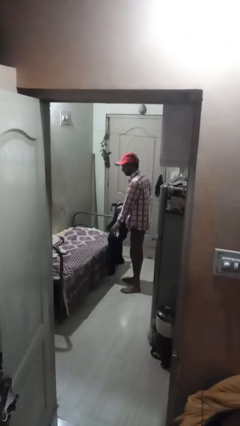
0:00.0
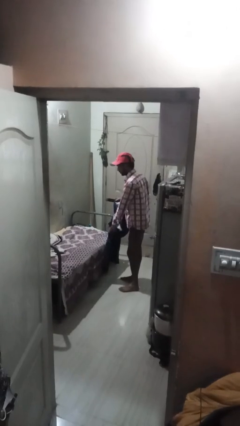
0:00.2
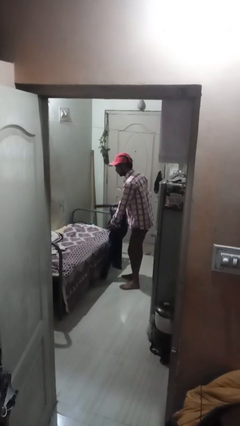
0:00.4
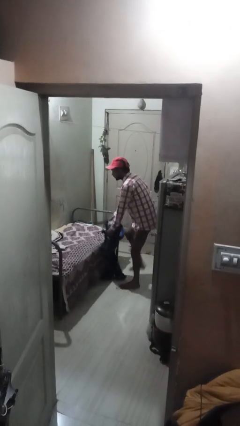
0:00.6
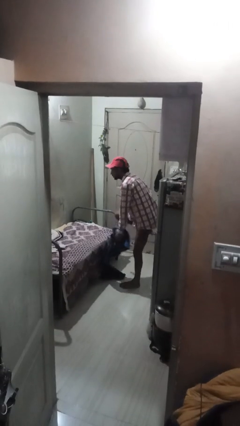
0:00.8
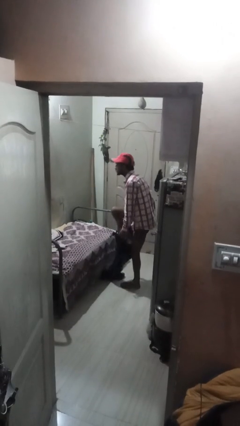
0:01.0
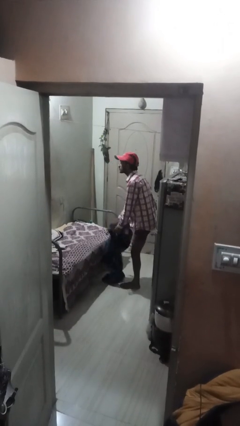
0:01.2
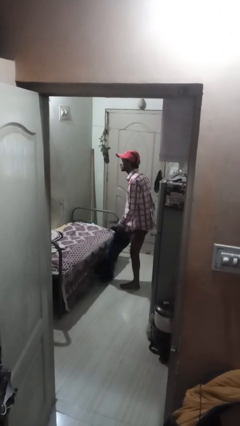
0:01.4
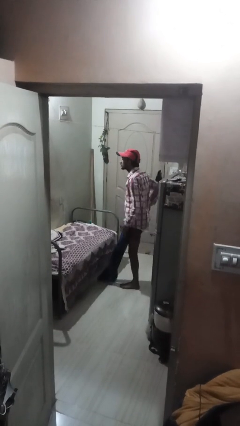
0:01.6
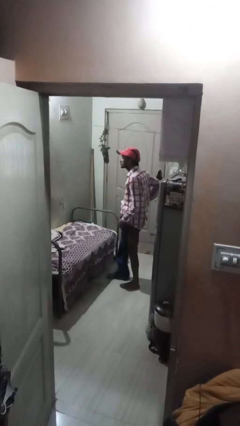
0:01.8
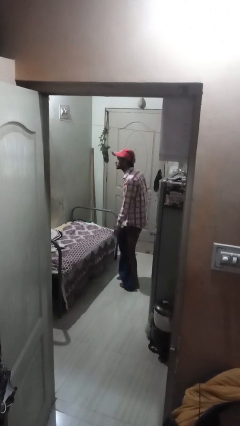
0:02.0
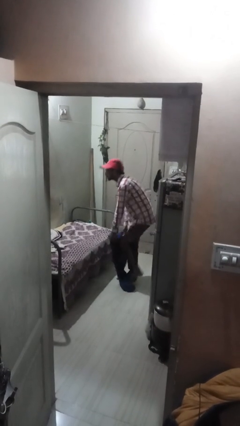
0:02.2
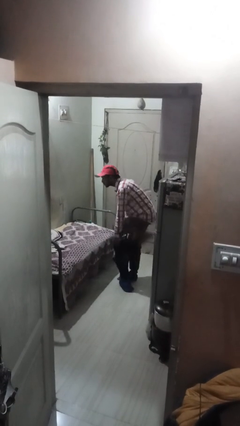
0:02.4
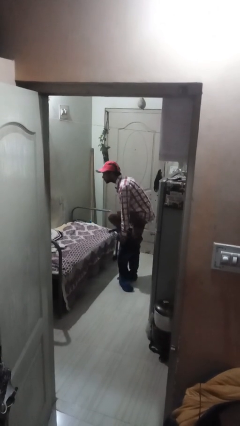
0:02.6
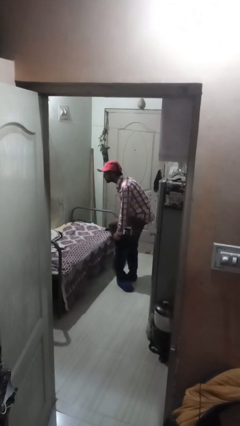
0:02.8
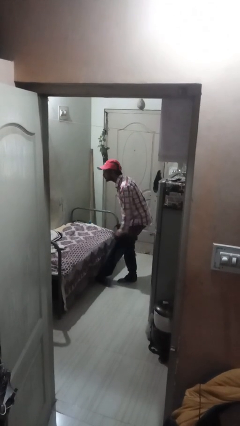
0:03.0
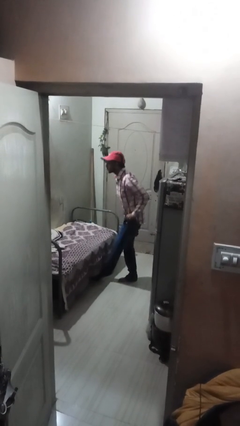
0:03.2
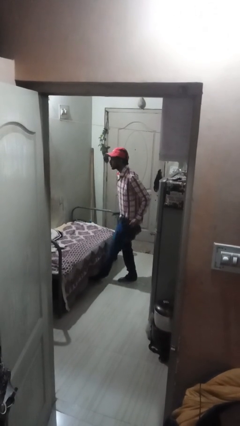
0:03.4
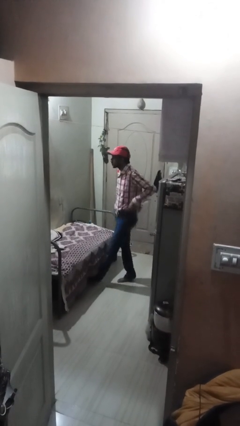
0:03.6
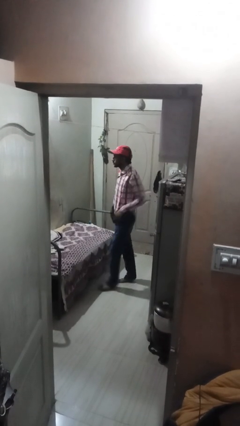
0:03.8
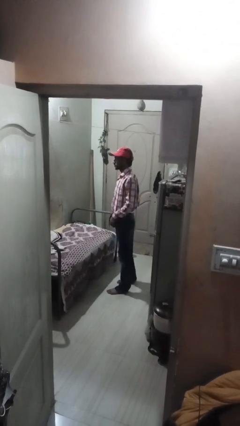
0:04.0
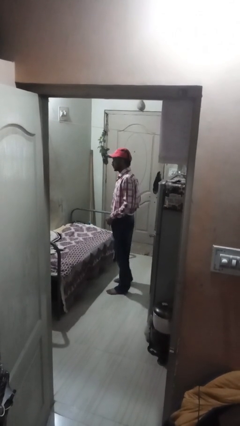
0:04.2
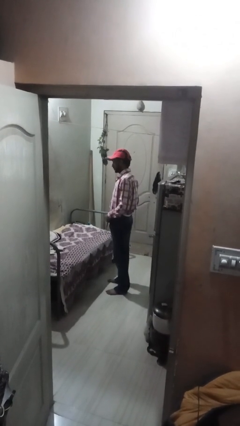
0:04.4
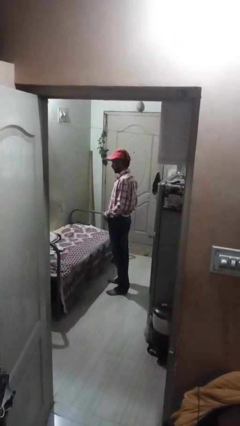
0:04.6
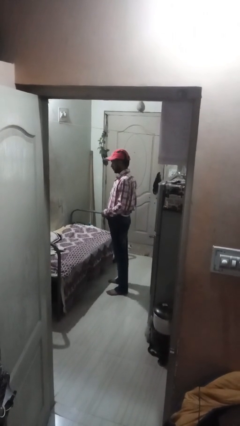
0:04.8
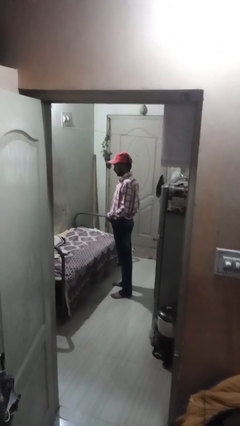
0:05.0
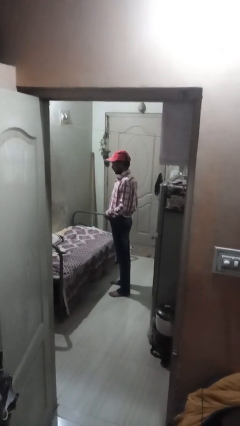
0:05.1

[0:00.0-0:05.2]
person puts on pants

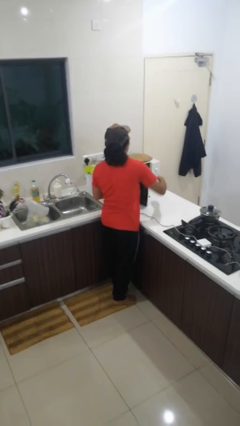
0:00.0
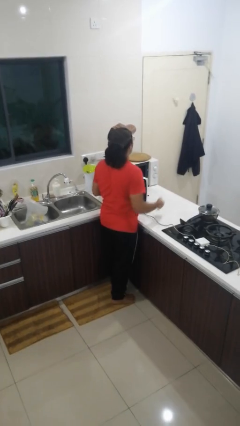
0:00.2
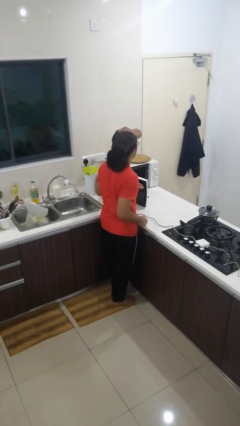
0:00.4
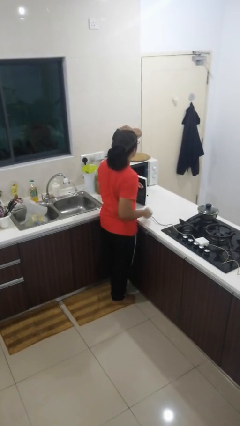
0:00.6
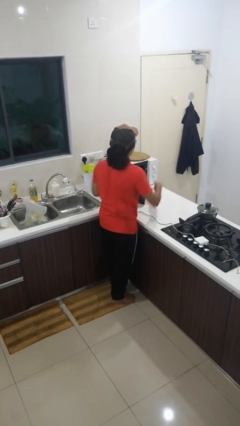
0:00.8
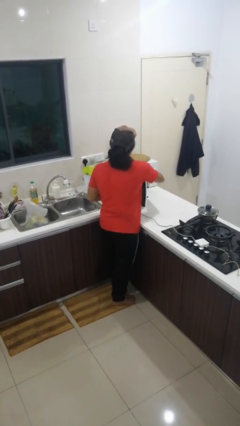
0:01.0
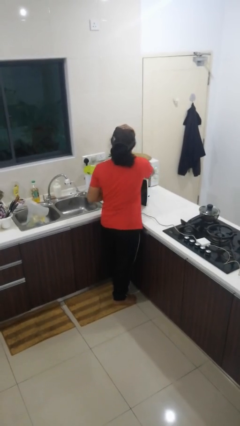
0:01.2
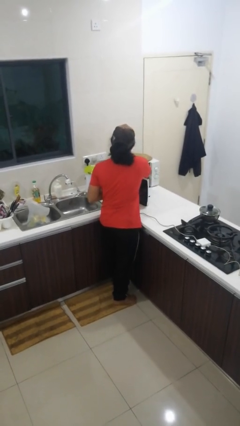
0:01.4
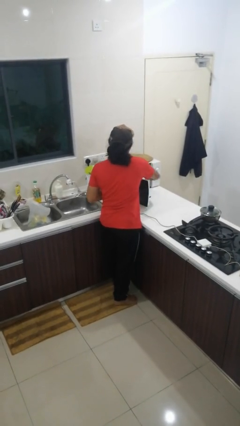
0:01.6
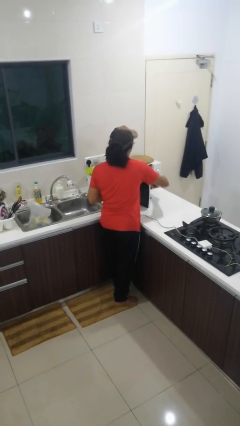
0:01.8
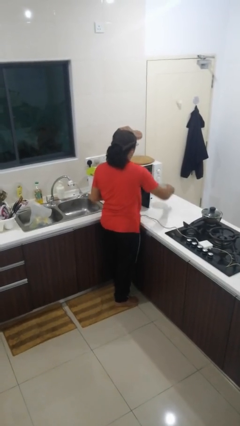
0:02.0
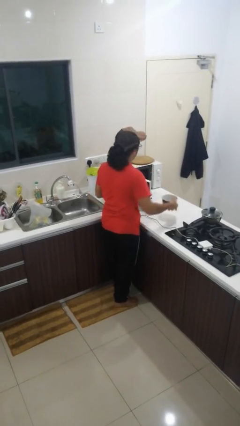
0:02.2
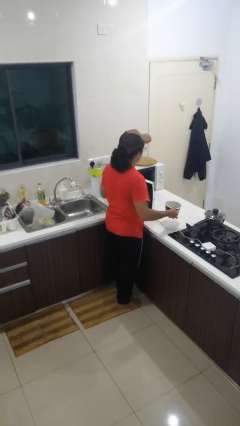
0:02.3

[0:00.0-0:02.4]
person takes object from microwave

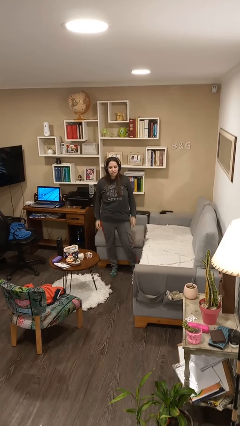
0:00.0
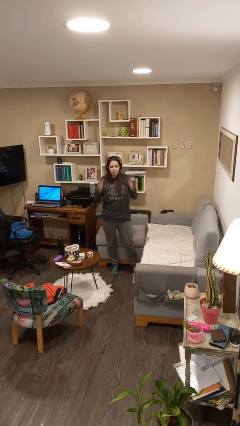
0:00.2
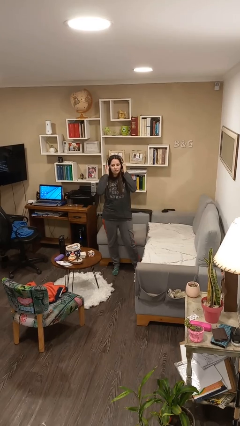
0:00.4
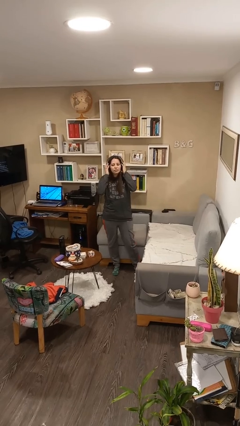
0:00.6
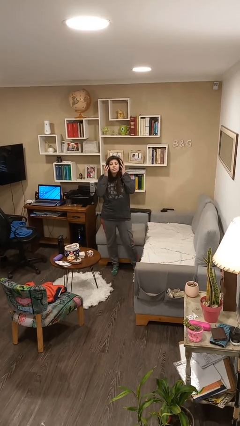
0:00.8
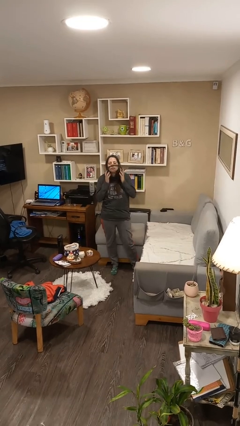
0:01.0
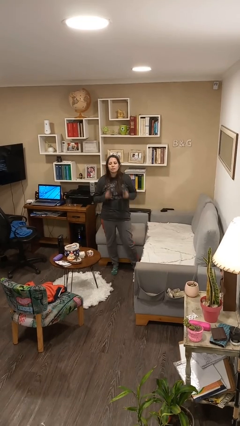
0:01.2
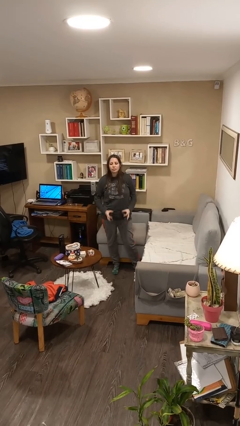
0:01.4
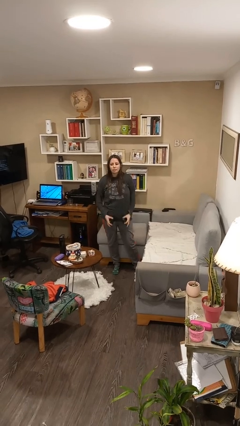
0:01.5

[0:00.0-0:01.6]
person takes off headphones

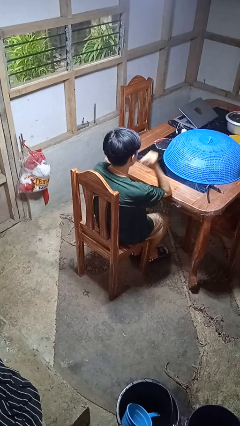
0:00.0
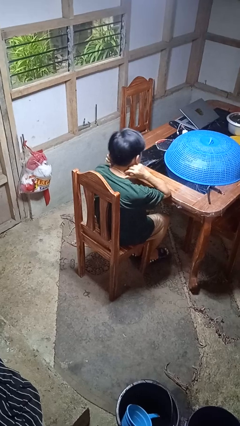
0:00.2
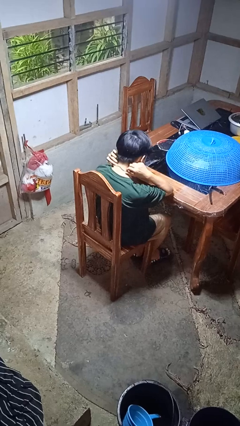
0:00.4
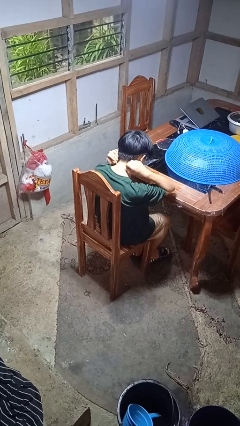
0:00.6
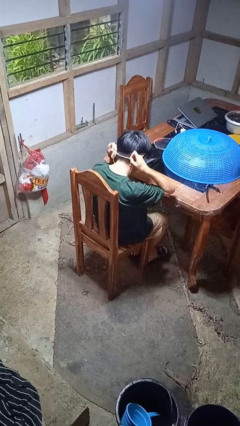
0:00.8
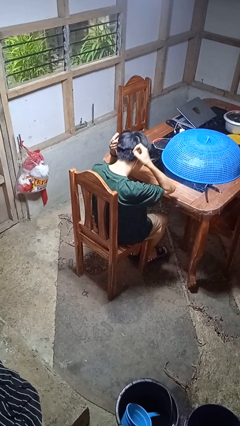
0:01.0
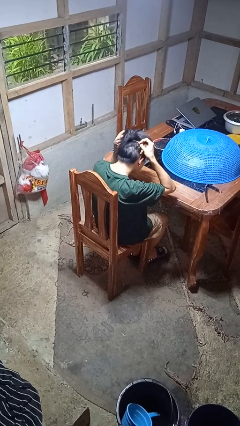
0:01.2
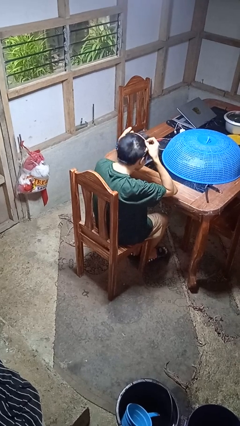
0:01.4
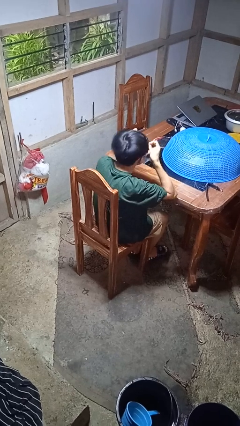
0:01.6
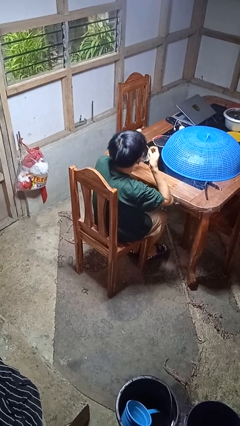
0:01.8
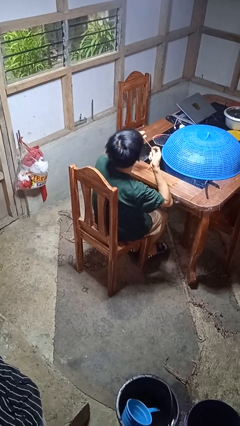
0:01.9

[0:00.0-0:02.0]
person takes off necklace

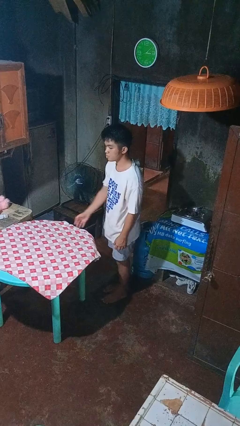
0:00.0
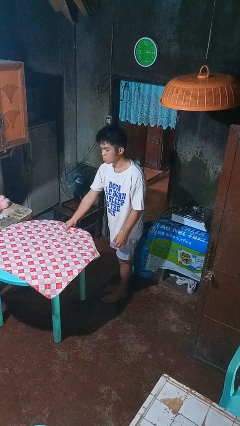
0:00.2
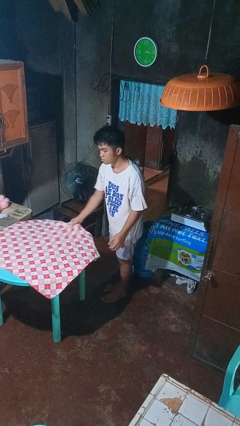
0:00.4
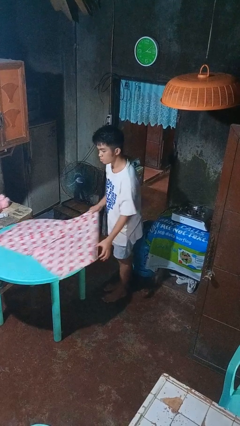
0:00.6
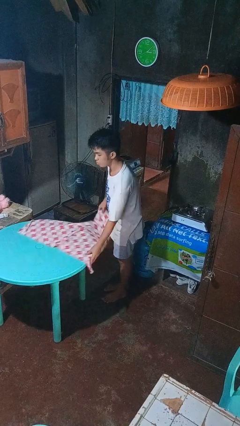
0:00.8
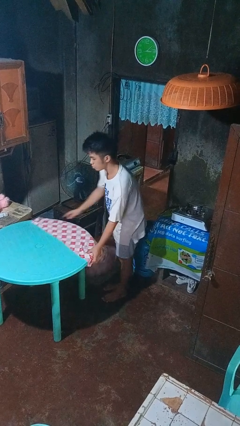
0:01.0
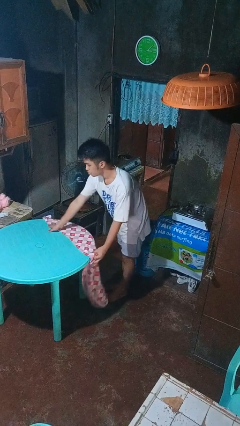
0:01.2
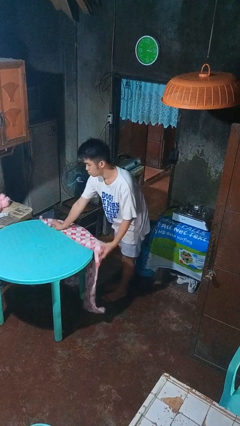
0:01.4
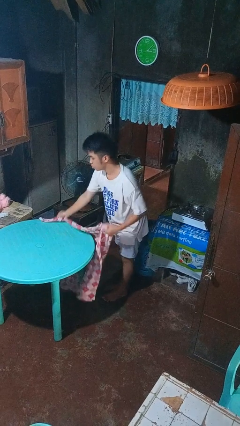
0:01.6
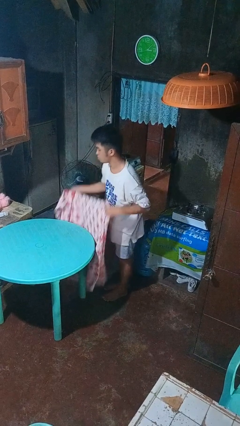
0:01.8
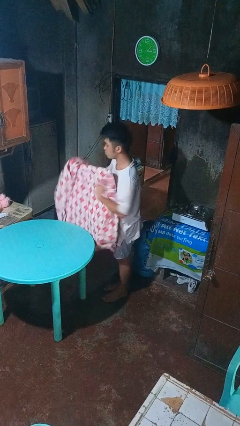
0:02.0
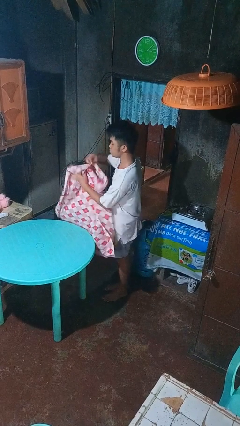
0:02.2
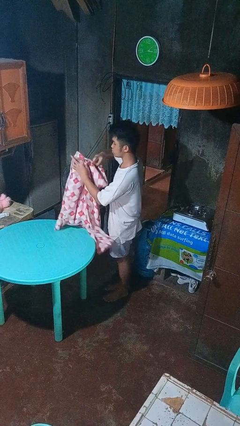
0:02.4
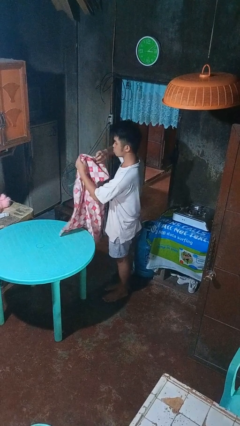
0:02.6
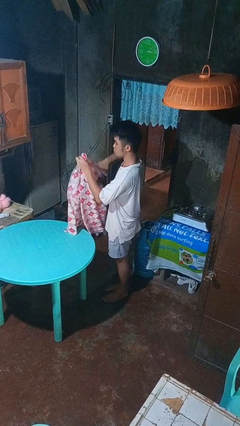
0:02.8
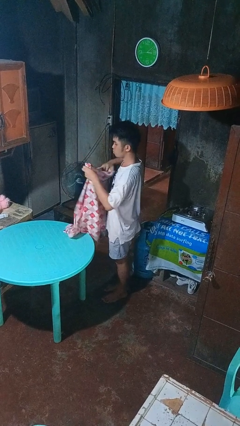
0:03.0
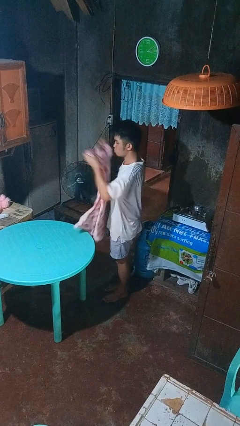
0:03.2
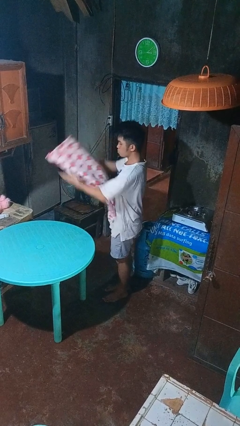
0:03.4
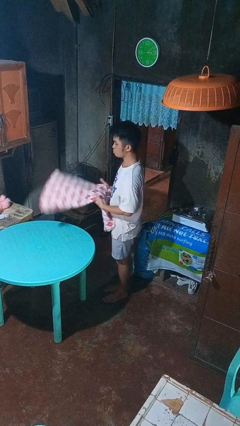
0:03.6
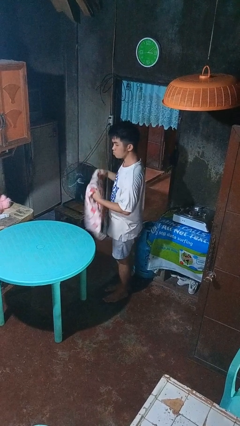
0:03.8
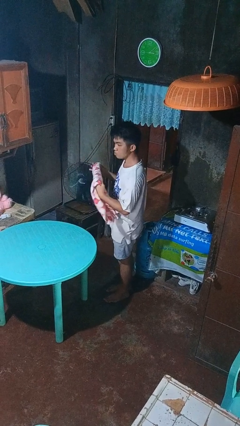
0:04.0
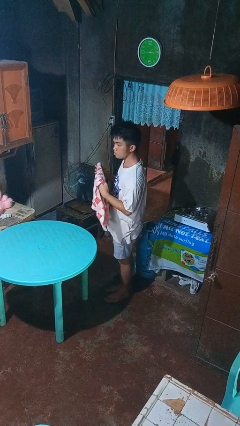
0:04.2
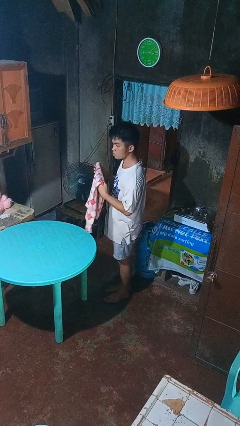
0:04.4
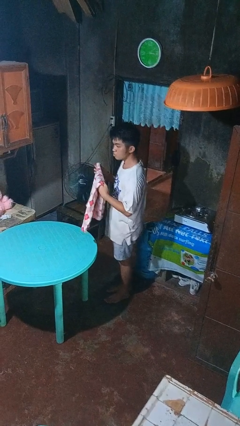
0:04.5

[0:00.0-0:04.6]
person folds tablecloth

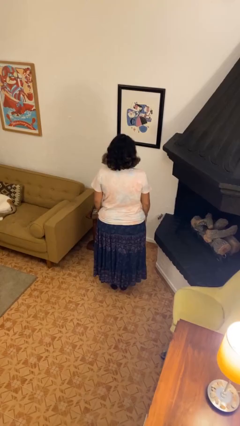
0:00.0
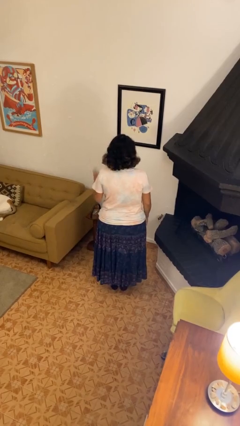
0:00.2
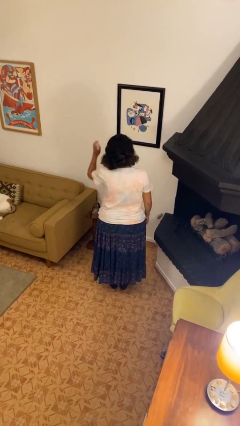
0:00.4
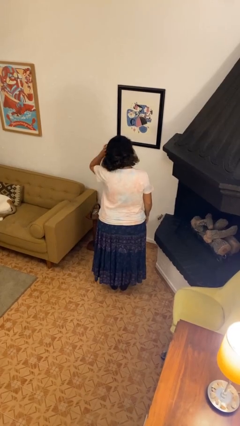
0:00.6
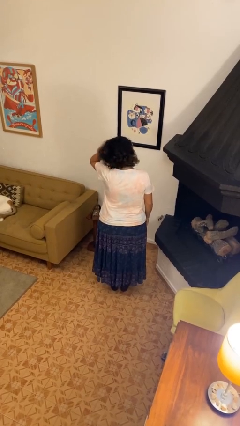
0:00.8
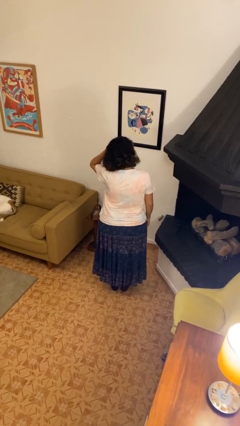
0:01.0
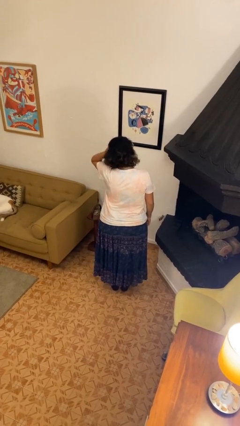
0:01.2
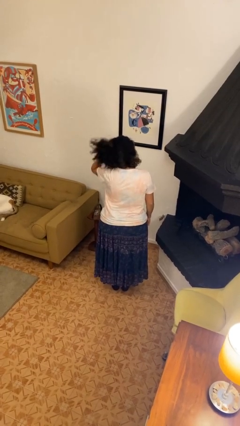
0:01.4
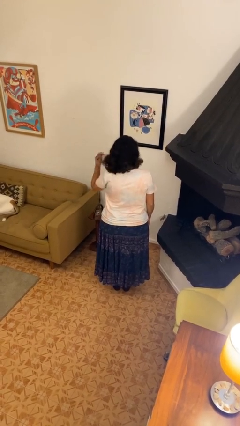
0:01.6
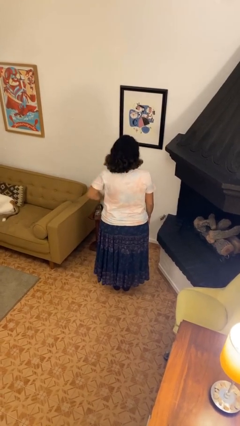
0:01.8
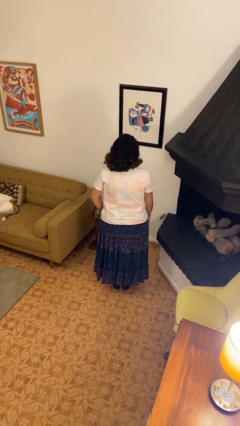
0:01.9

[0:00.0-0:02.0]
person scratches face

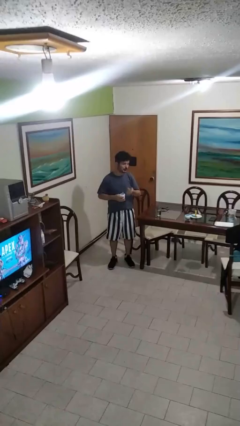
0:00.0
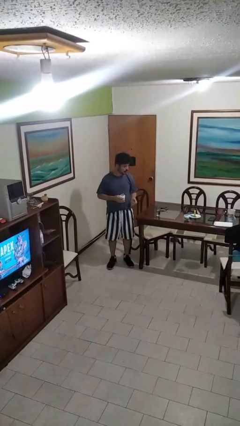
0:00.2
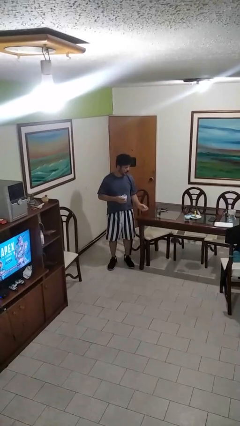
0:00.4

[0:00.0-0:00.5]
person takes medicine pills
